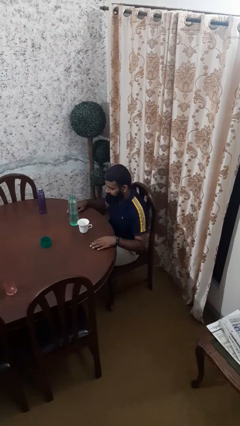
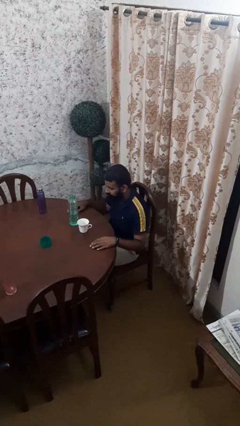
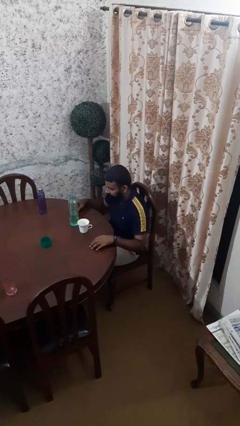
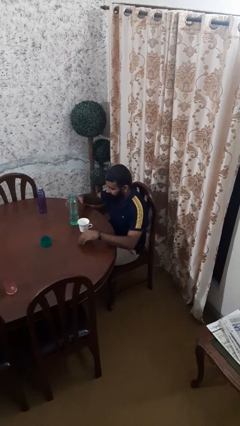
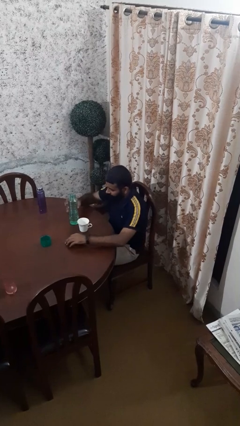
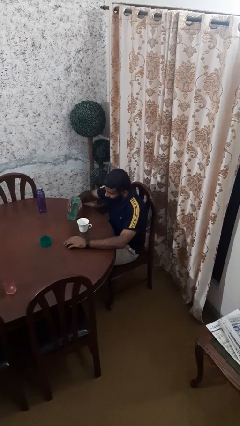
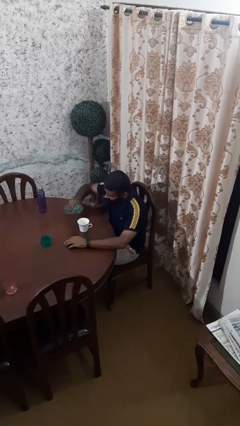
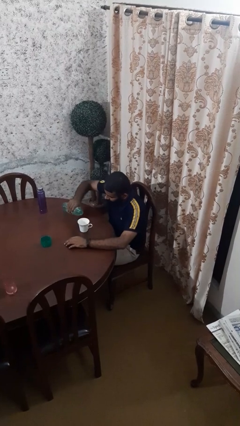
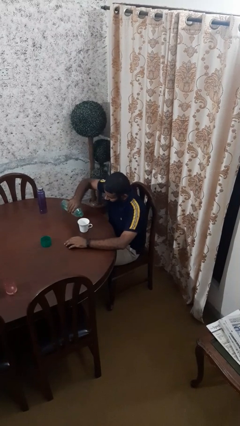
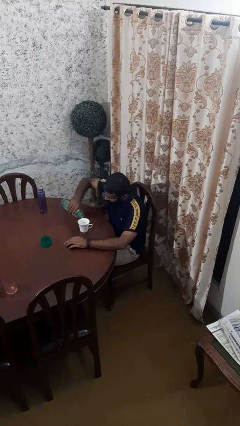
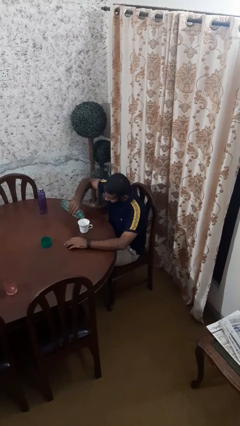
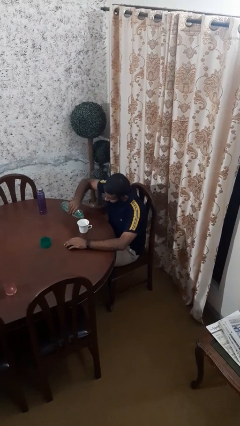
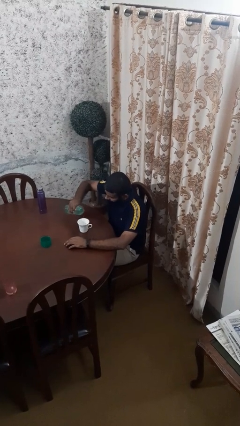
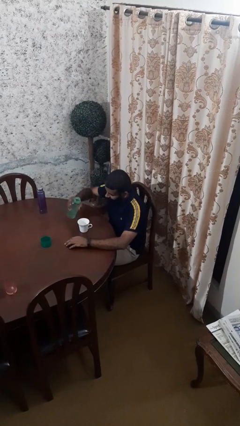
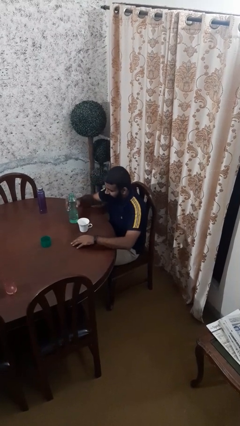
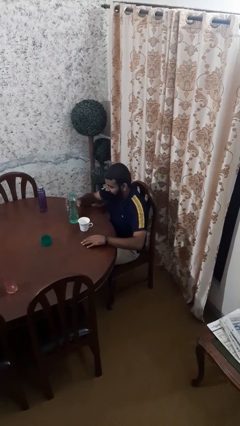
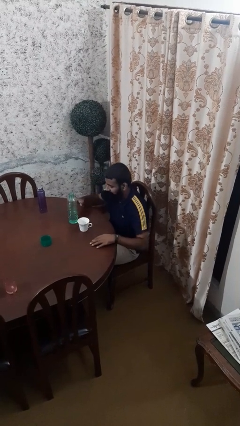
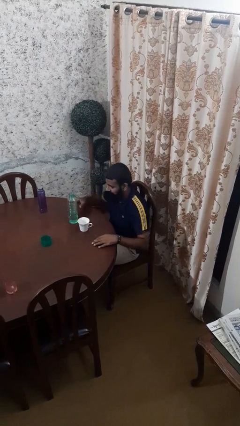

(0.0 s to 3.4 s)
person pours liquid into cup

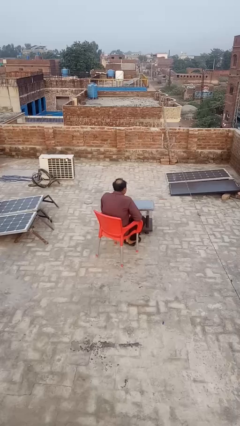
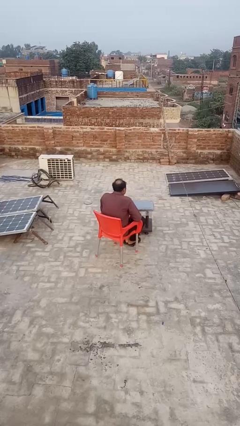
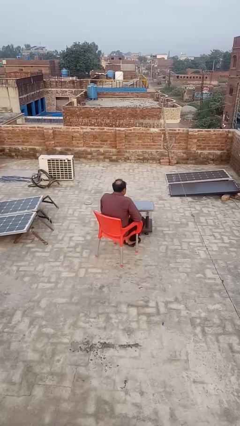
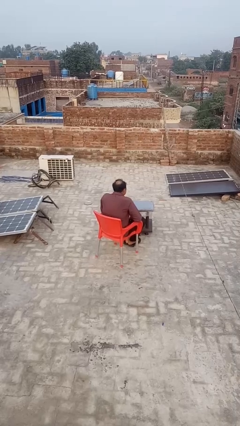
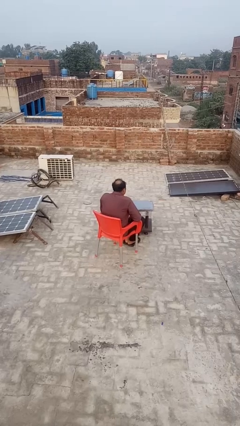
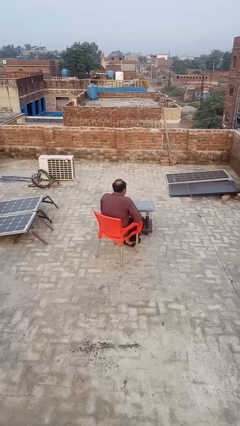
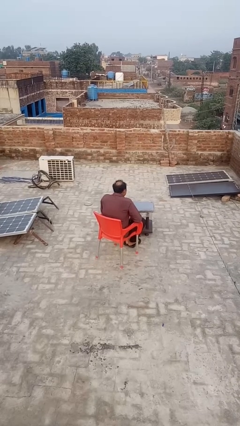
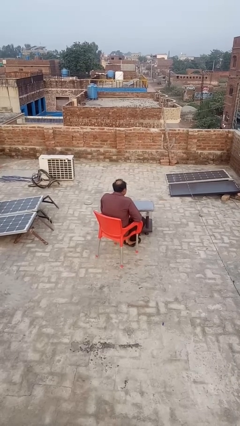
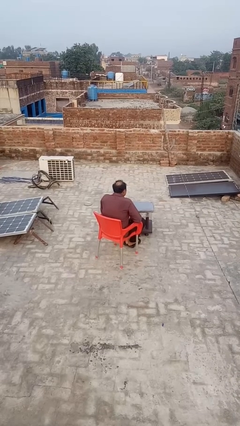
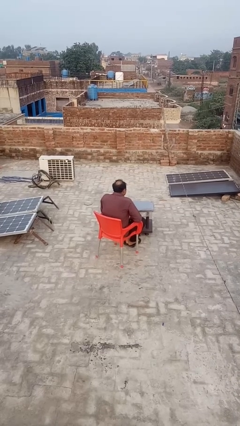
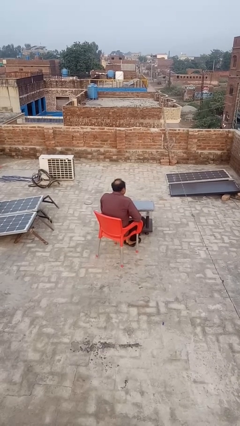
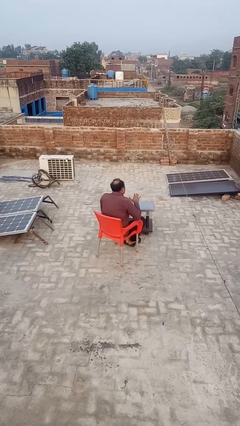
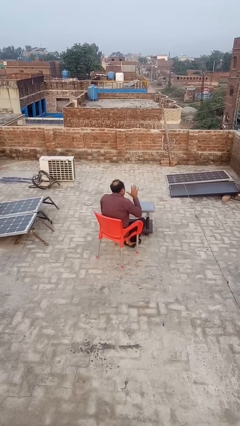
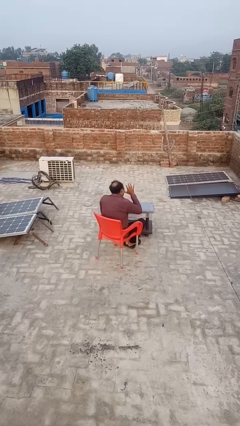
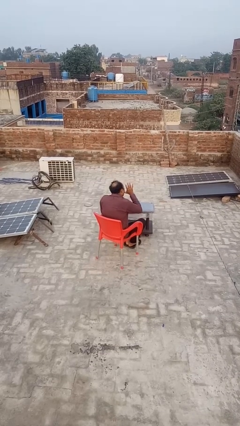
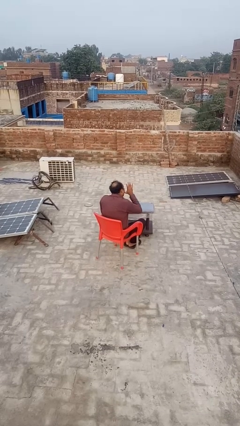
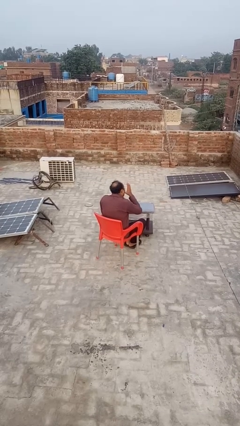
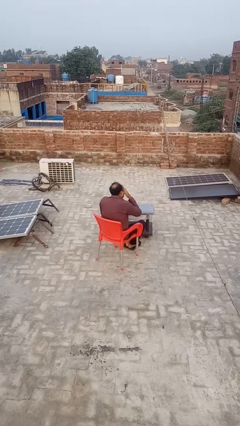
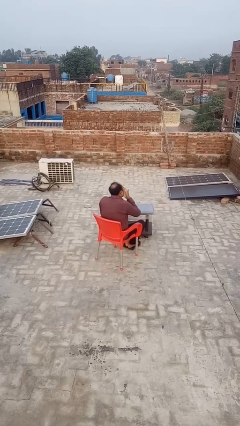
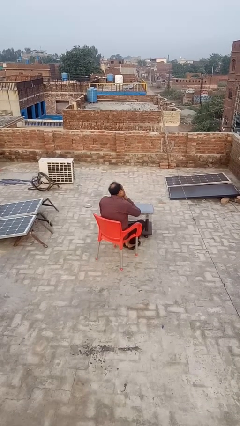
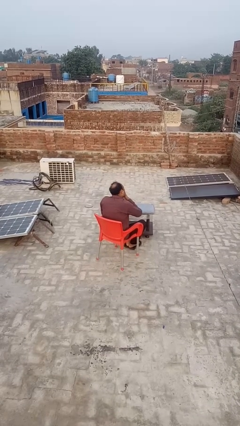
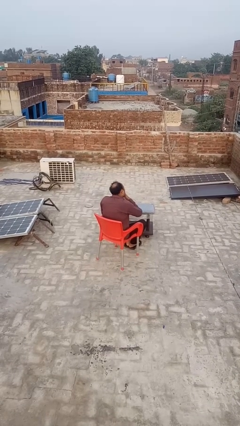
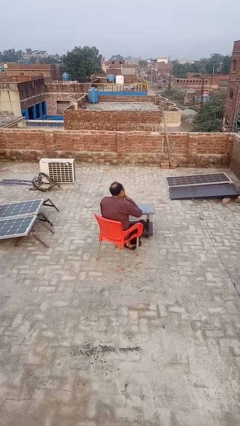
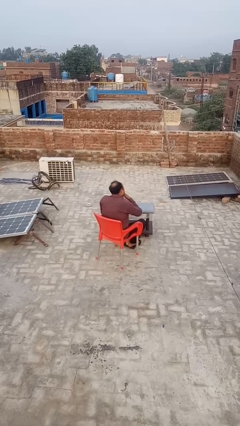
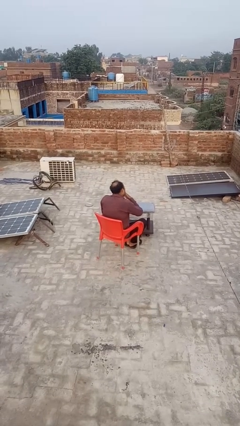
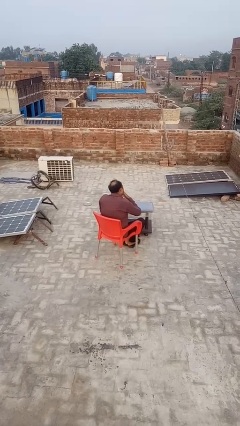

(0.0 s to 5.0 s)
person licks fingers

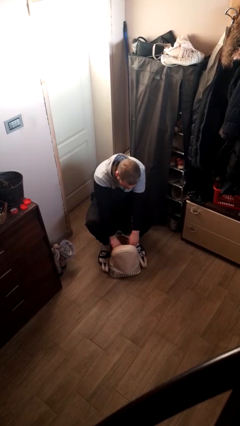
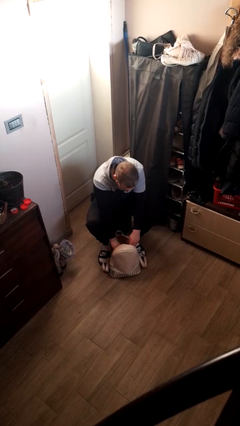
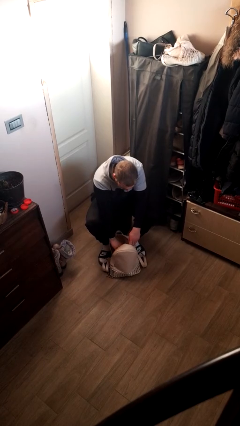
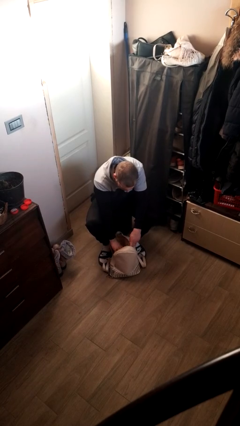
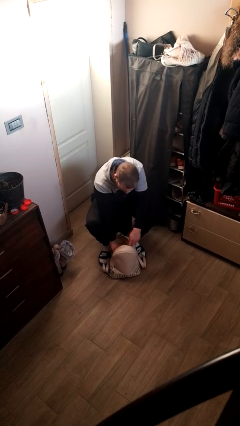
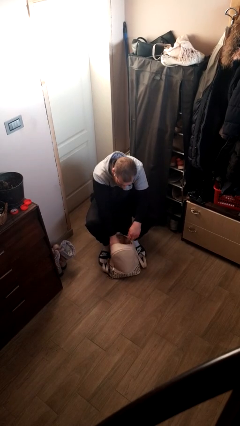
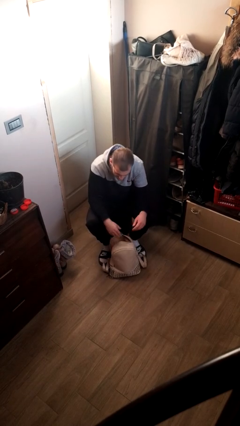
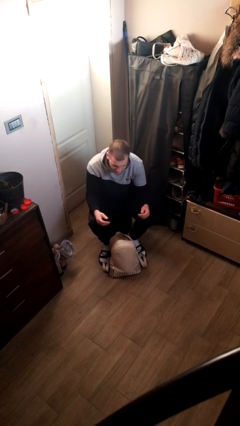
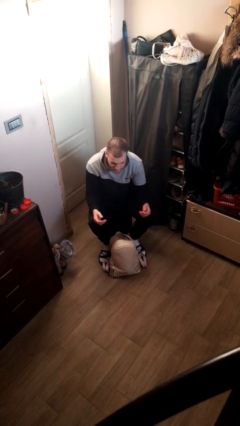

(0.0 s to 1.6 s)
person puts object into backpack

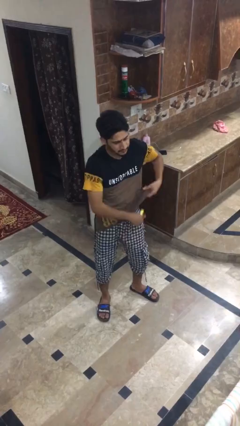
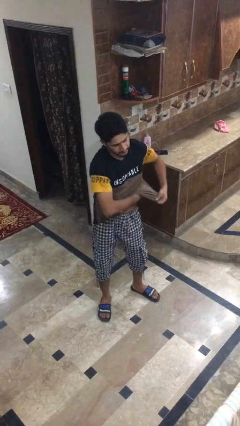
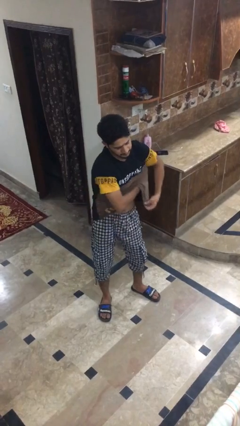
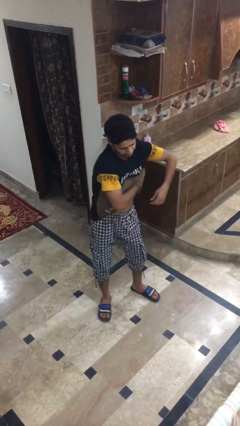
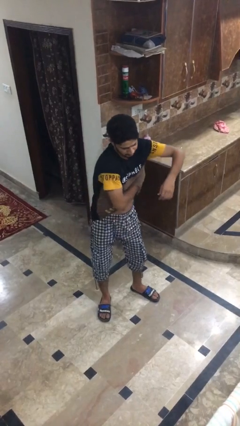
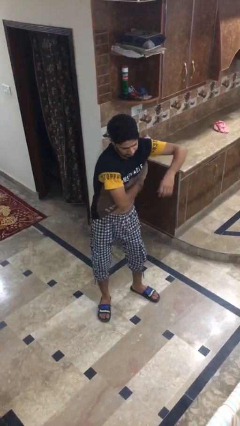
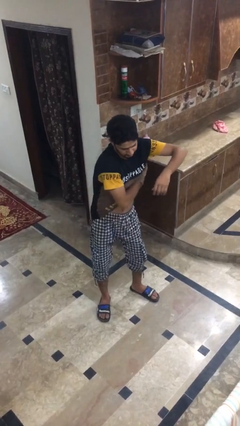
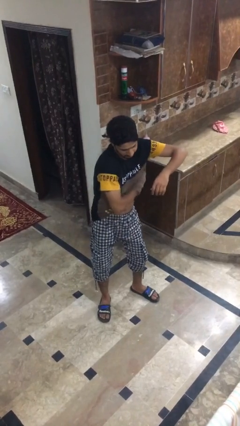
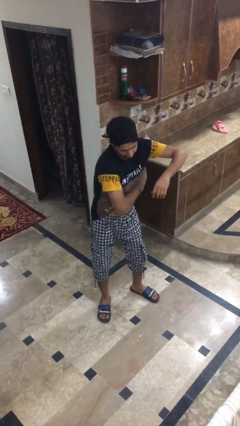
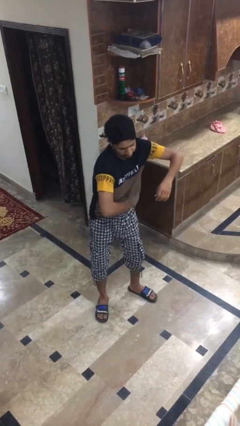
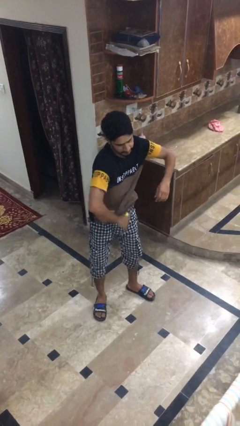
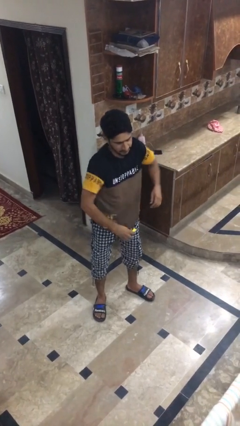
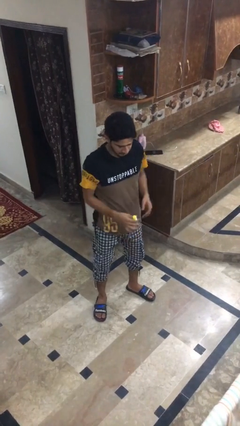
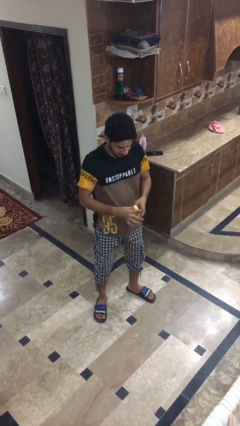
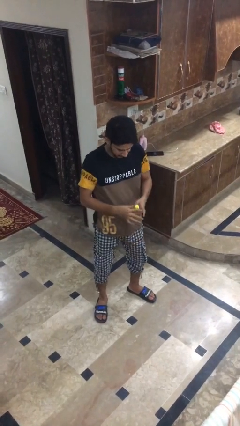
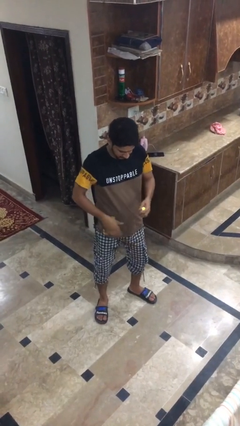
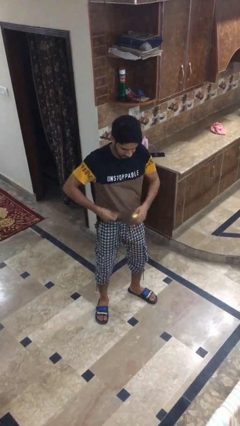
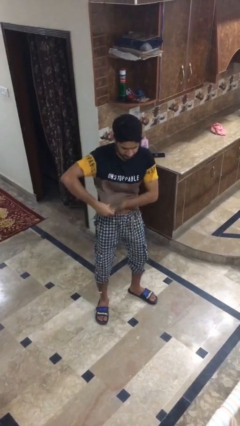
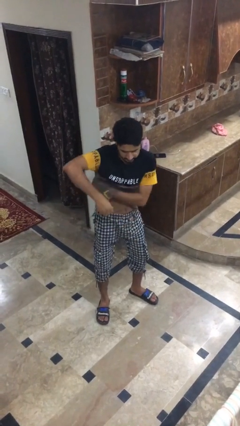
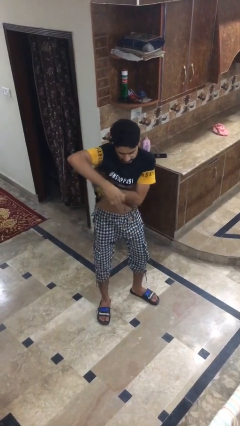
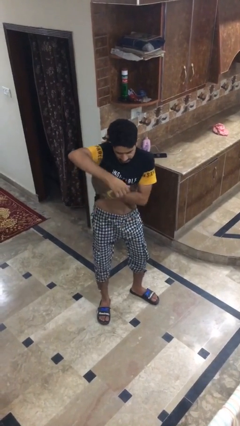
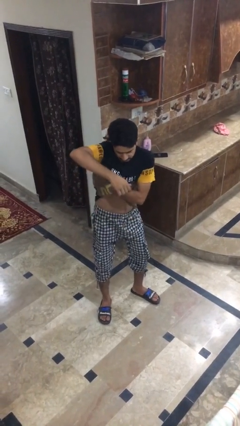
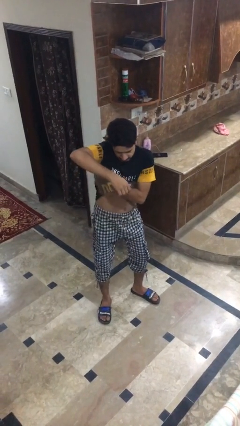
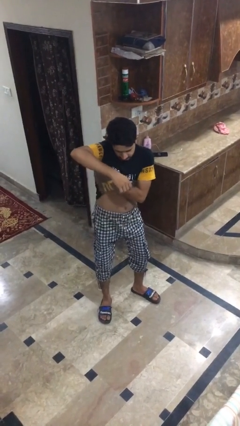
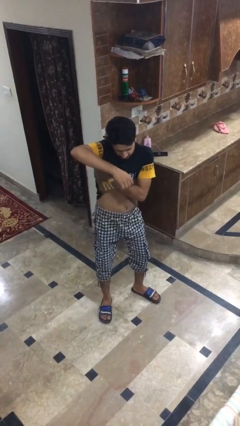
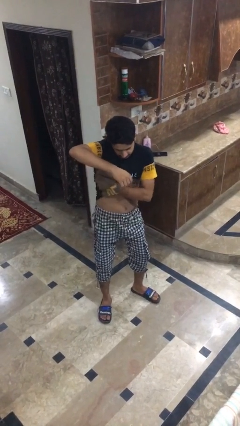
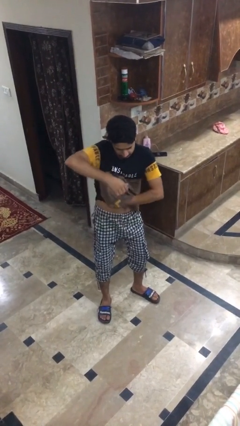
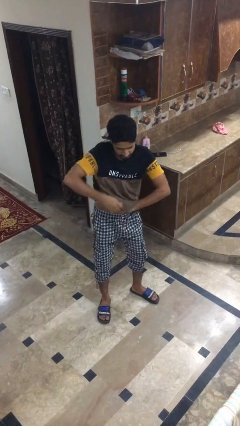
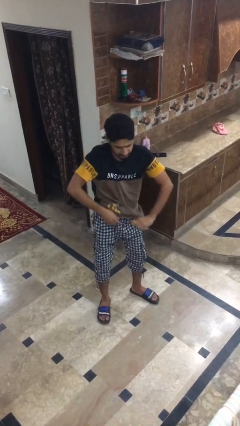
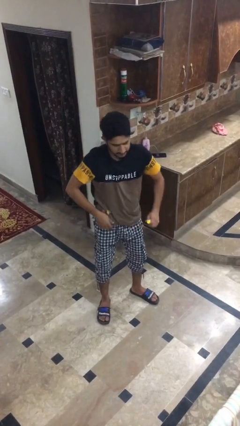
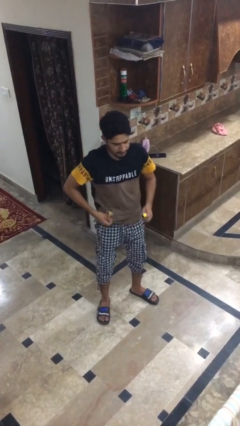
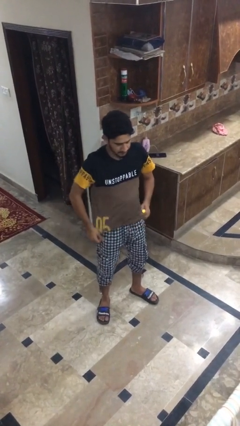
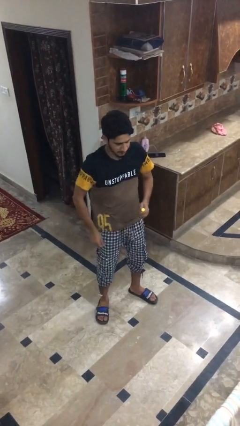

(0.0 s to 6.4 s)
person applies deodorant

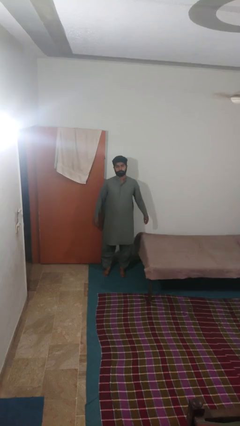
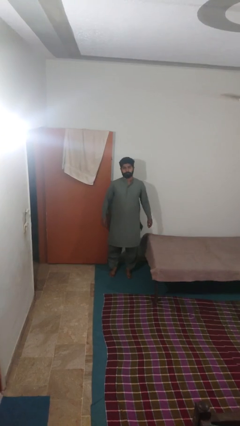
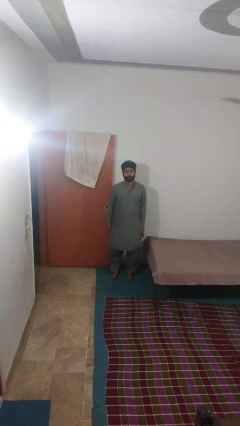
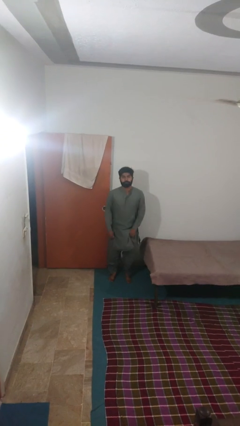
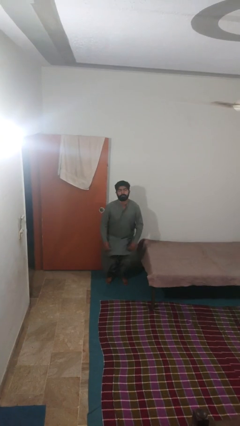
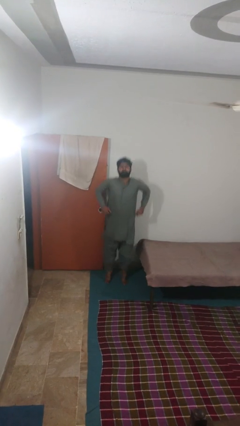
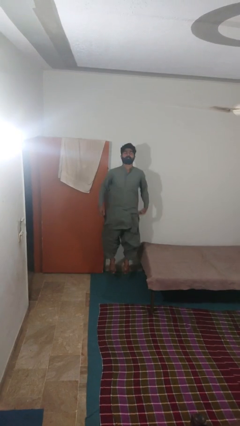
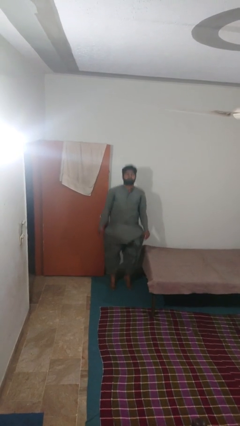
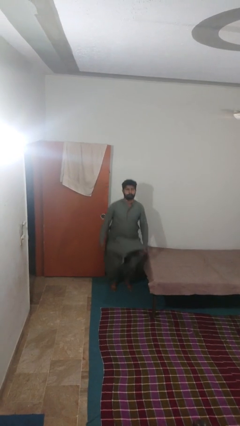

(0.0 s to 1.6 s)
person jumps
